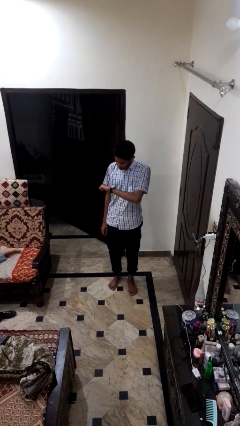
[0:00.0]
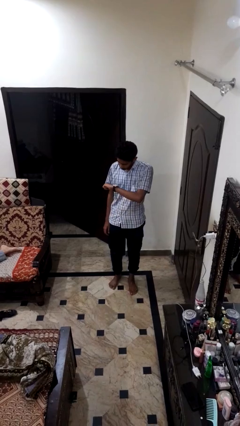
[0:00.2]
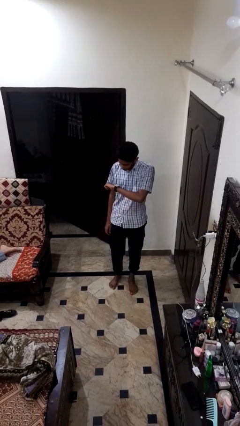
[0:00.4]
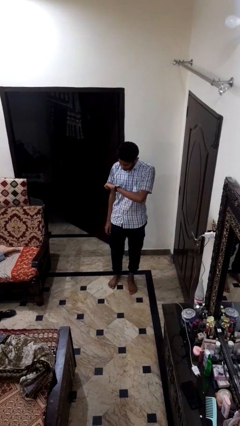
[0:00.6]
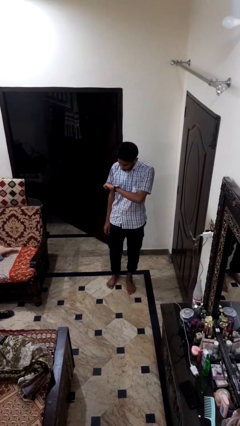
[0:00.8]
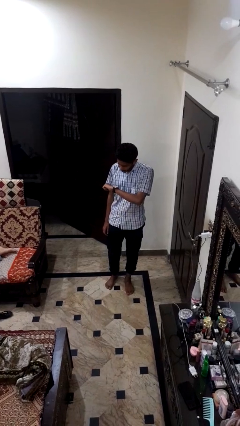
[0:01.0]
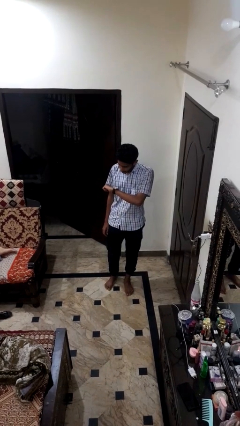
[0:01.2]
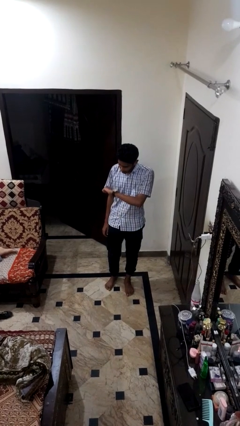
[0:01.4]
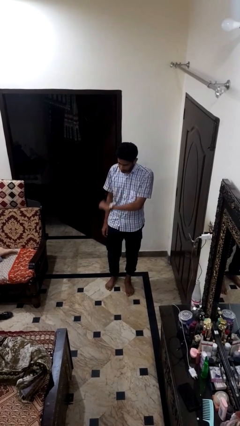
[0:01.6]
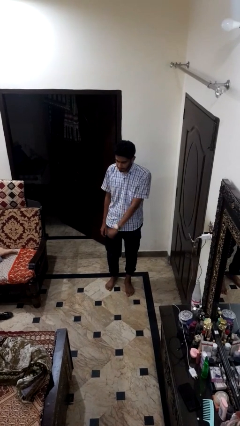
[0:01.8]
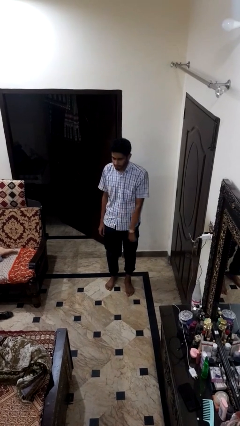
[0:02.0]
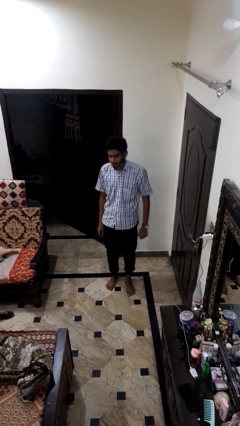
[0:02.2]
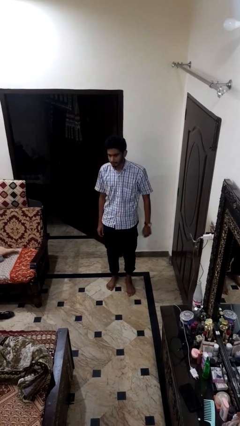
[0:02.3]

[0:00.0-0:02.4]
person looks at wristwatch

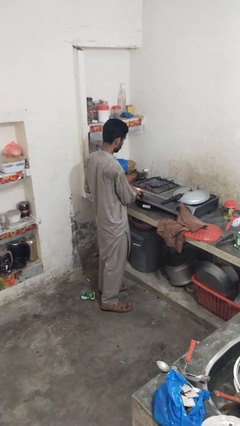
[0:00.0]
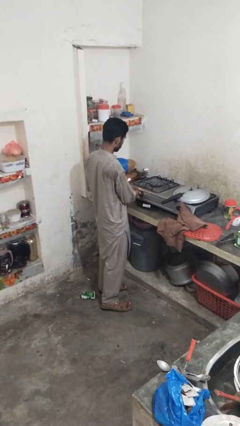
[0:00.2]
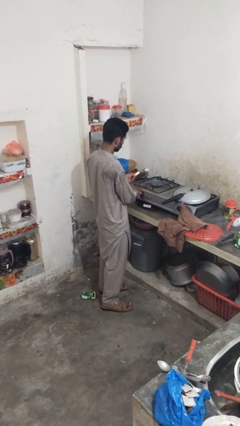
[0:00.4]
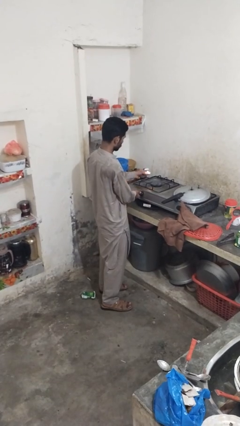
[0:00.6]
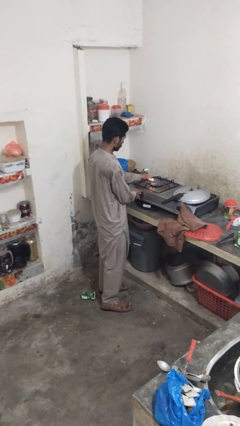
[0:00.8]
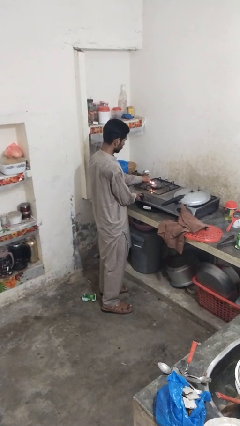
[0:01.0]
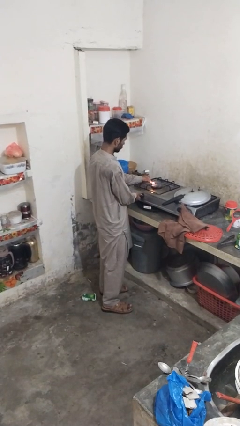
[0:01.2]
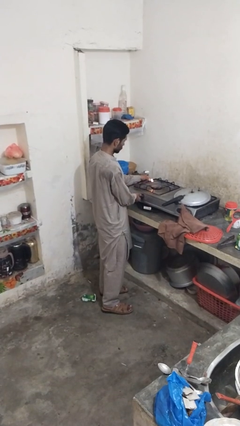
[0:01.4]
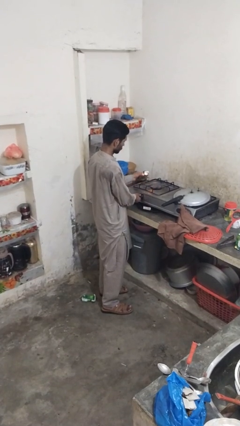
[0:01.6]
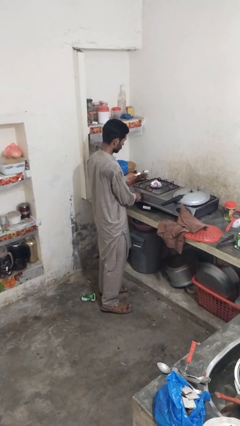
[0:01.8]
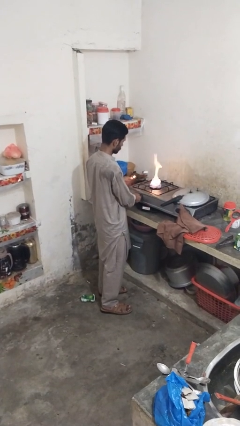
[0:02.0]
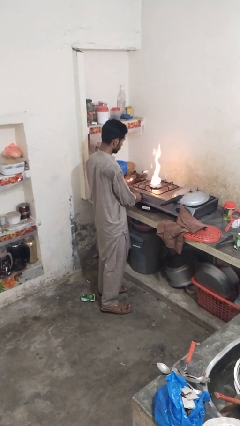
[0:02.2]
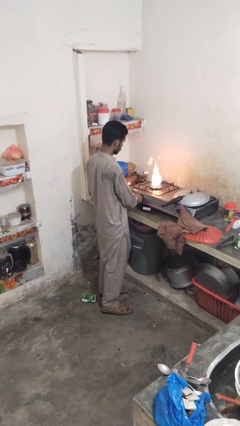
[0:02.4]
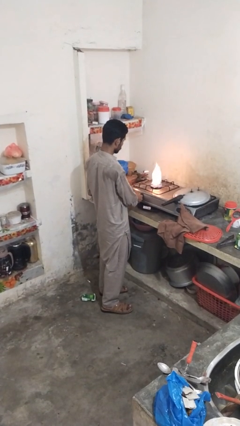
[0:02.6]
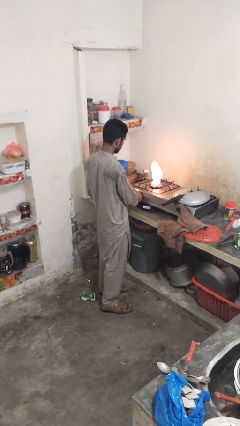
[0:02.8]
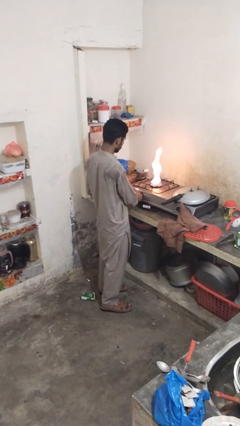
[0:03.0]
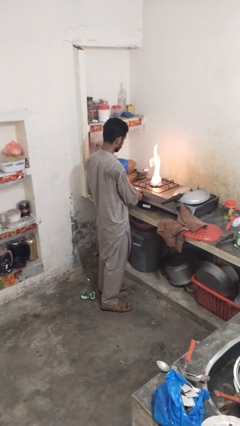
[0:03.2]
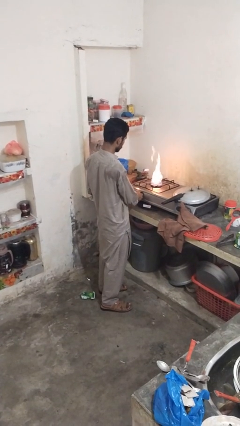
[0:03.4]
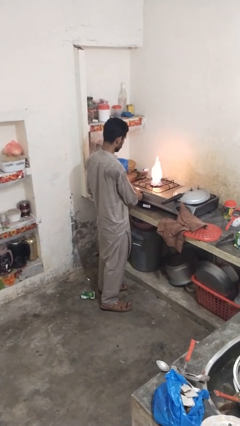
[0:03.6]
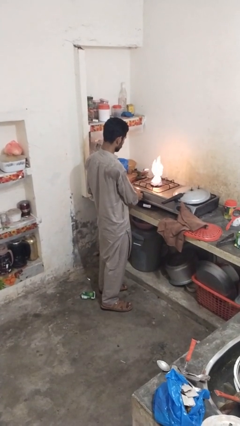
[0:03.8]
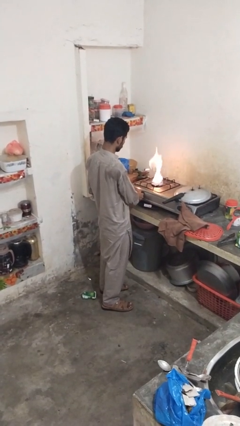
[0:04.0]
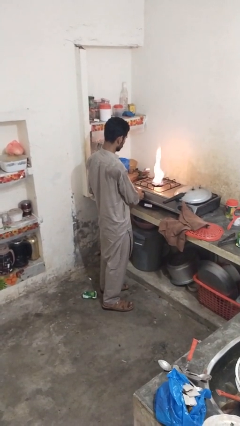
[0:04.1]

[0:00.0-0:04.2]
person turns on stovetop

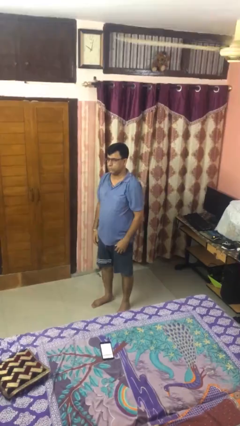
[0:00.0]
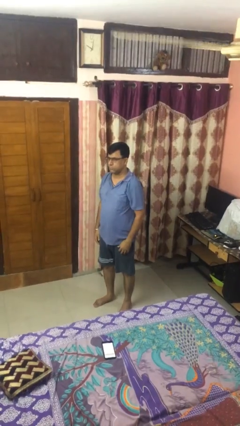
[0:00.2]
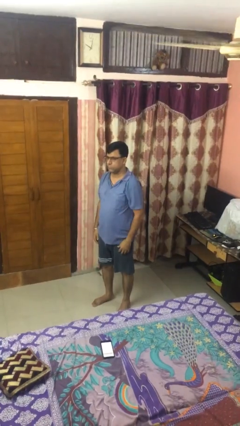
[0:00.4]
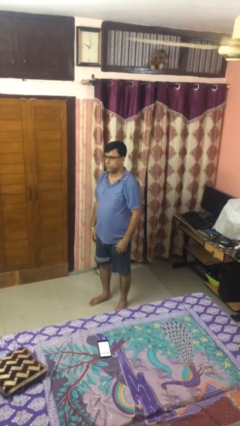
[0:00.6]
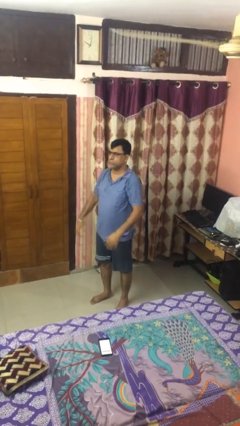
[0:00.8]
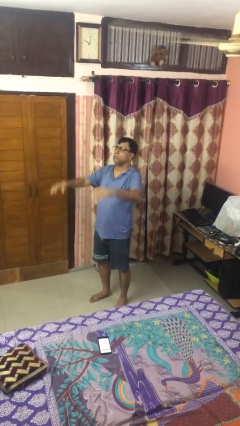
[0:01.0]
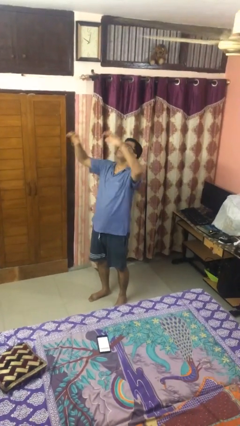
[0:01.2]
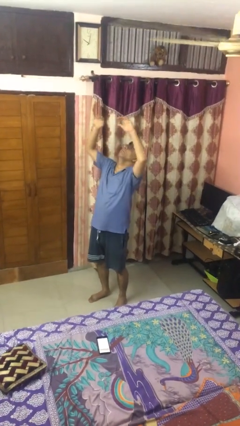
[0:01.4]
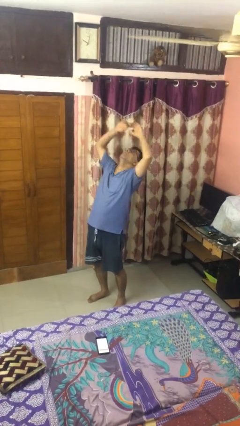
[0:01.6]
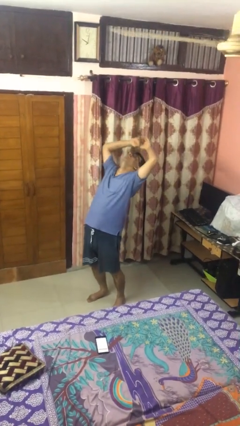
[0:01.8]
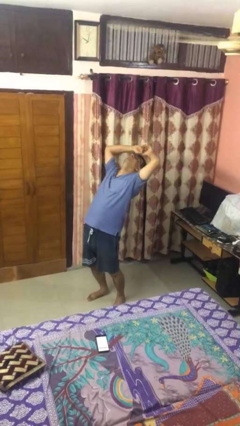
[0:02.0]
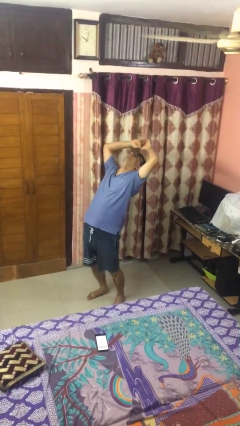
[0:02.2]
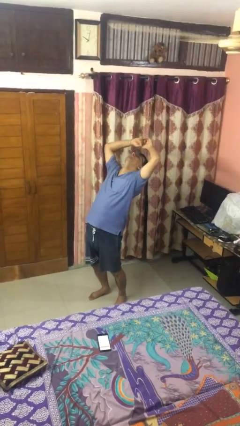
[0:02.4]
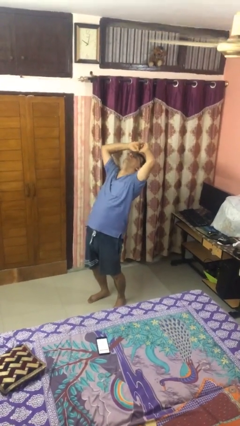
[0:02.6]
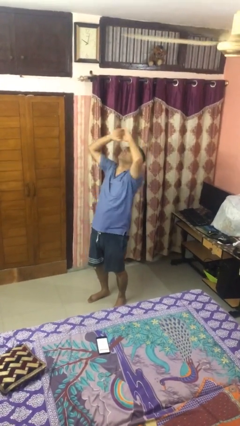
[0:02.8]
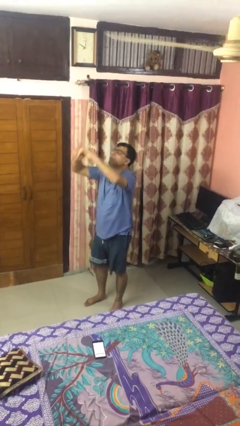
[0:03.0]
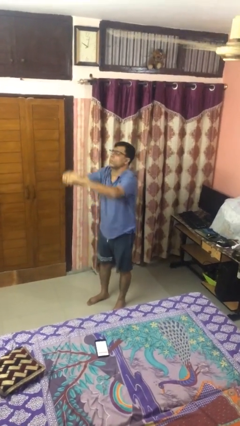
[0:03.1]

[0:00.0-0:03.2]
person stretches back

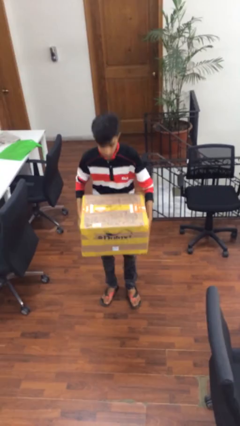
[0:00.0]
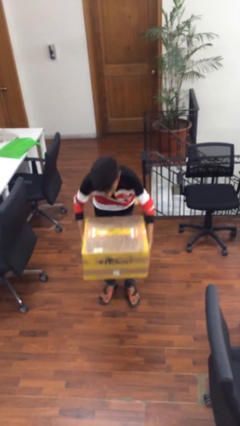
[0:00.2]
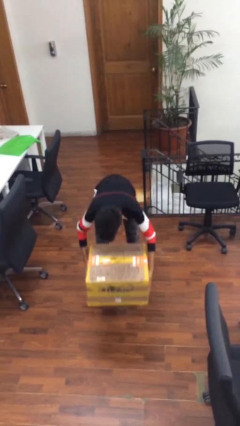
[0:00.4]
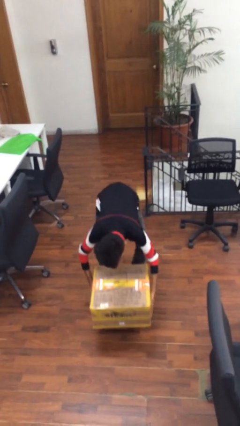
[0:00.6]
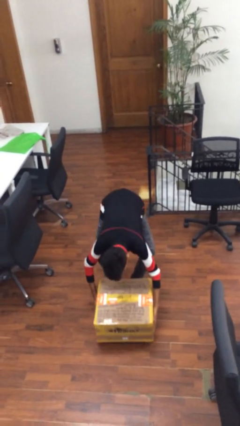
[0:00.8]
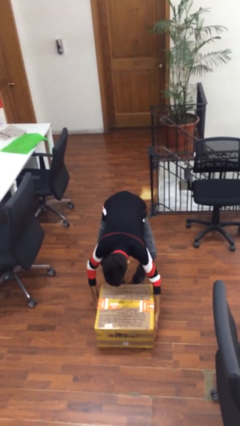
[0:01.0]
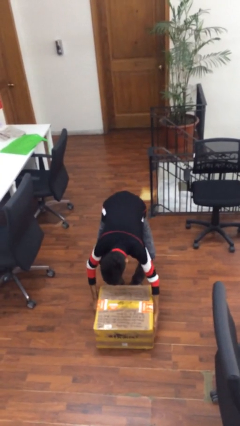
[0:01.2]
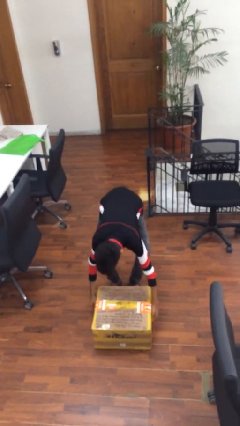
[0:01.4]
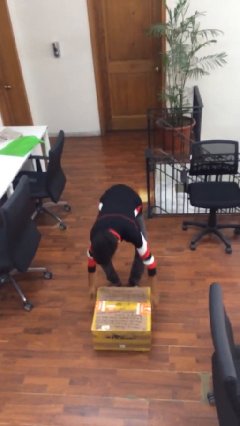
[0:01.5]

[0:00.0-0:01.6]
person puts down object on floor

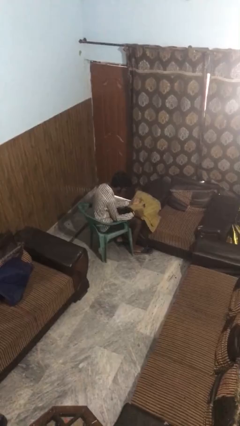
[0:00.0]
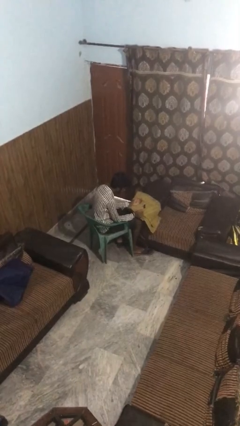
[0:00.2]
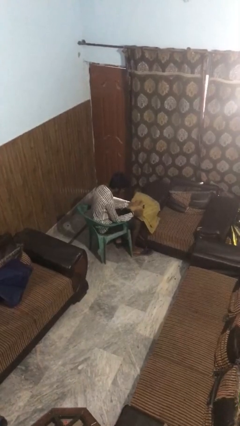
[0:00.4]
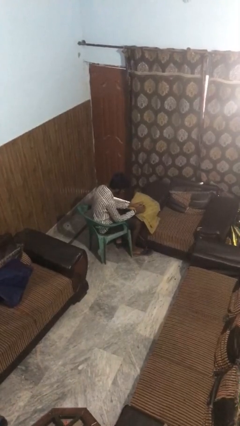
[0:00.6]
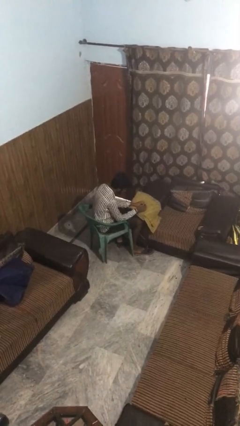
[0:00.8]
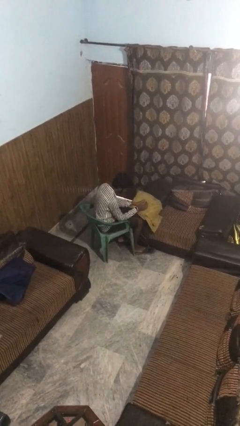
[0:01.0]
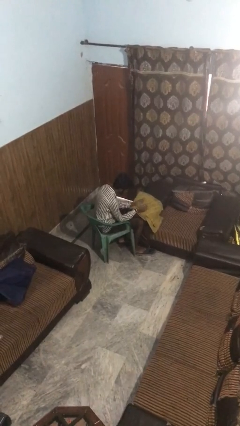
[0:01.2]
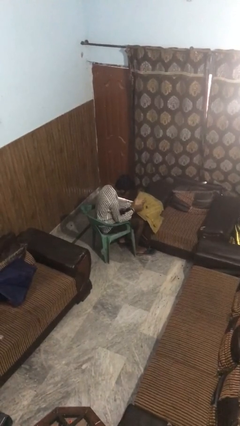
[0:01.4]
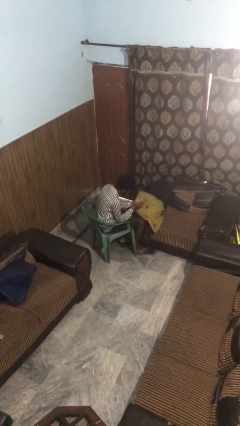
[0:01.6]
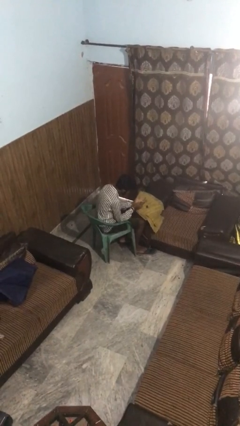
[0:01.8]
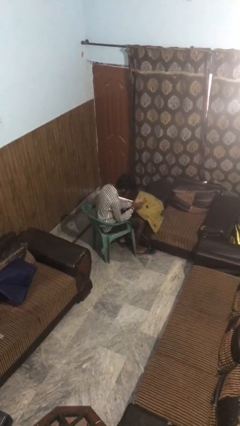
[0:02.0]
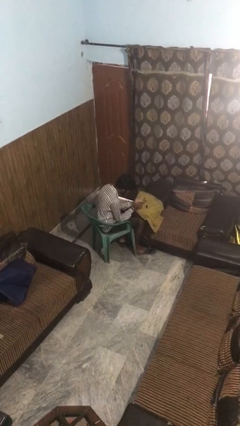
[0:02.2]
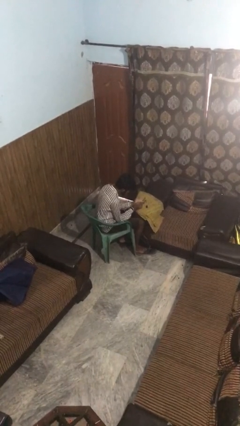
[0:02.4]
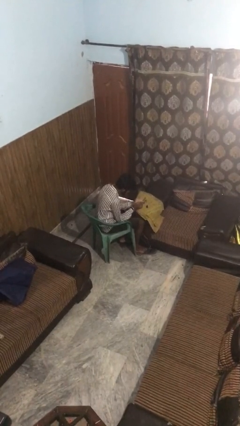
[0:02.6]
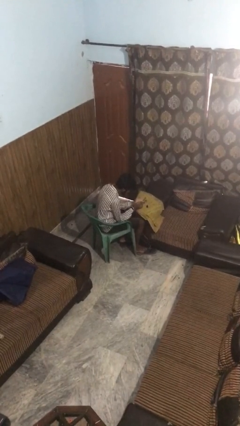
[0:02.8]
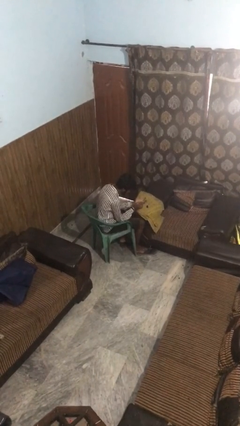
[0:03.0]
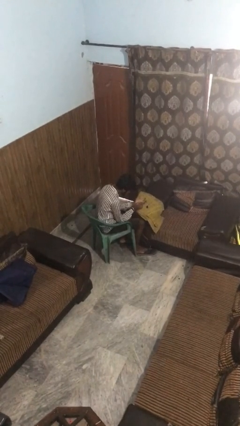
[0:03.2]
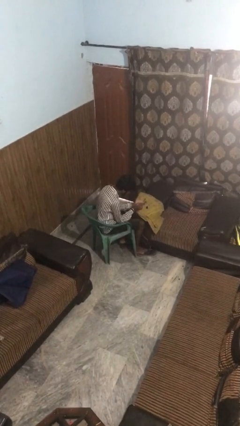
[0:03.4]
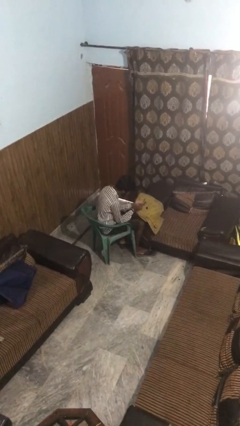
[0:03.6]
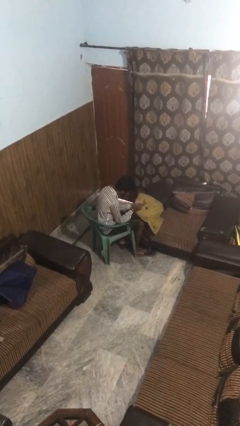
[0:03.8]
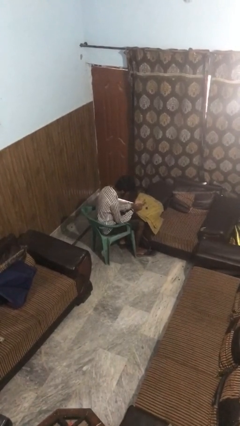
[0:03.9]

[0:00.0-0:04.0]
person paints fingernails

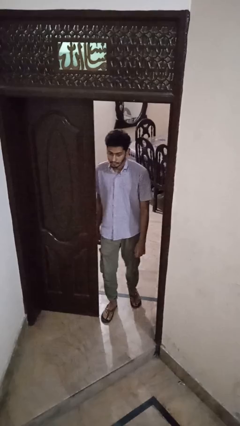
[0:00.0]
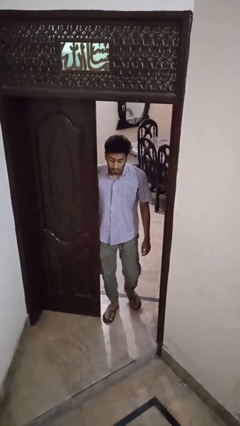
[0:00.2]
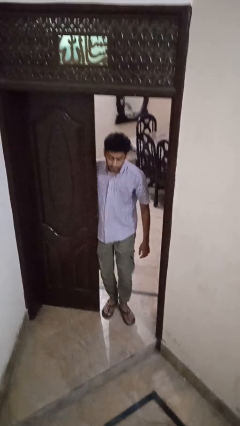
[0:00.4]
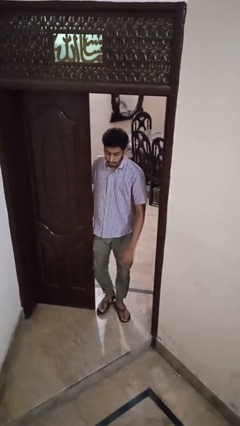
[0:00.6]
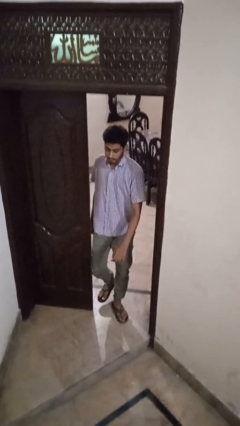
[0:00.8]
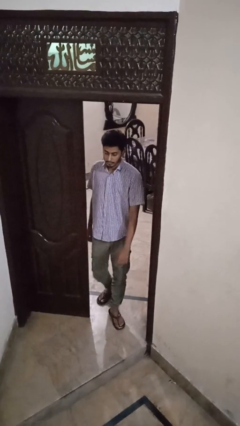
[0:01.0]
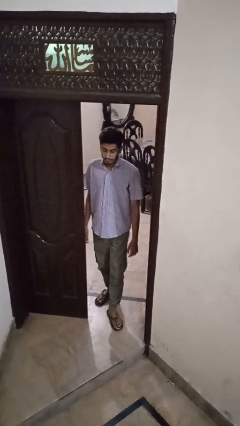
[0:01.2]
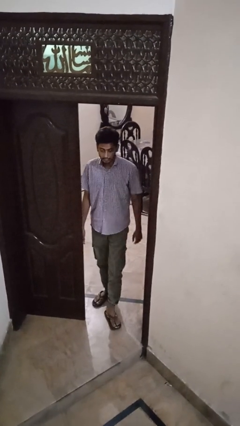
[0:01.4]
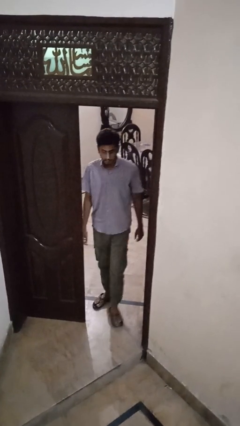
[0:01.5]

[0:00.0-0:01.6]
person bumps into wall

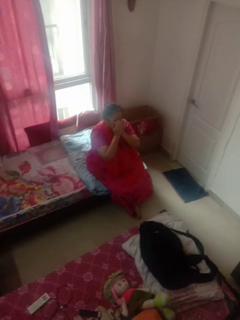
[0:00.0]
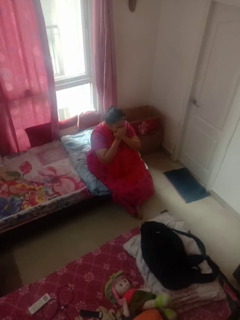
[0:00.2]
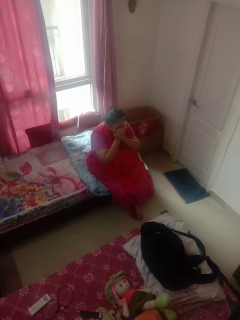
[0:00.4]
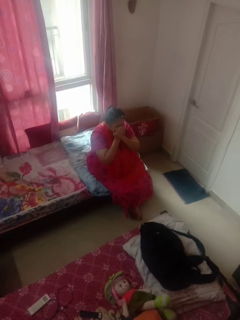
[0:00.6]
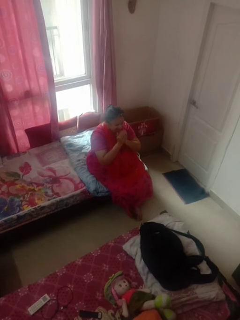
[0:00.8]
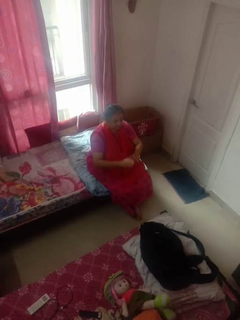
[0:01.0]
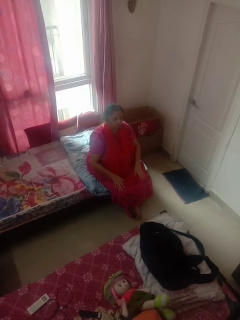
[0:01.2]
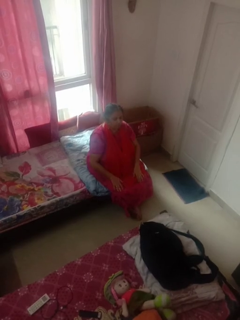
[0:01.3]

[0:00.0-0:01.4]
person sneezes into hand
